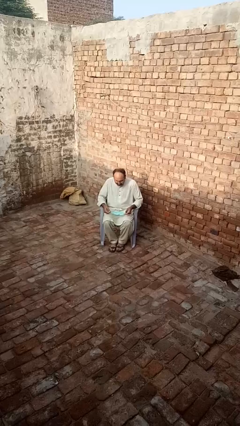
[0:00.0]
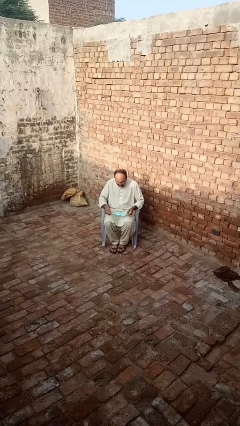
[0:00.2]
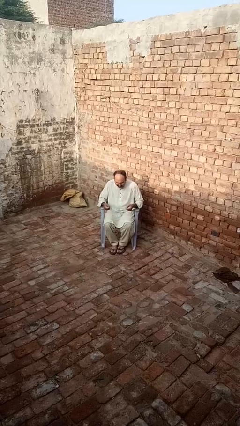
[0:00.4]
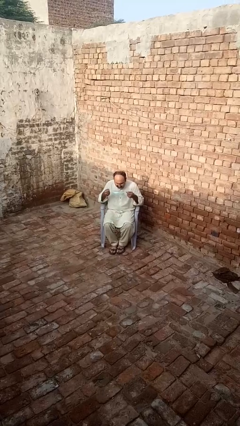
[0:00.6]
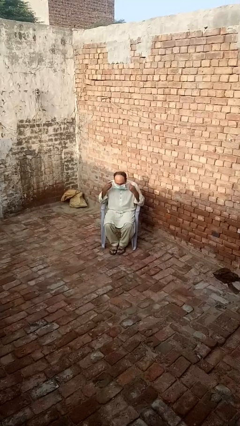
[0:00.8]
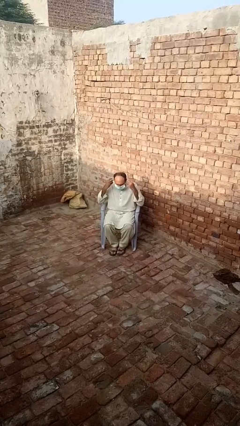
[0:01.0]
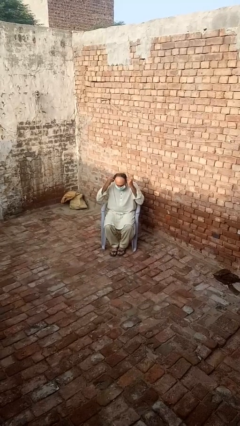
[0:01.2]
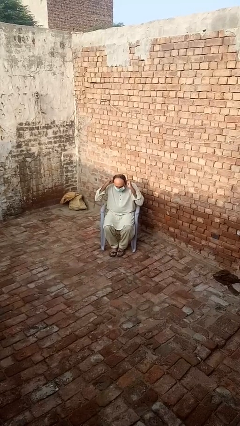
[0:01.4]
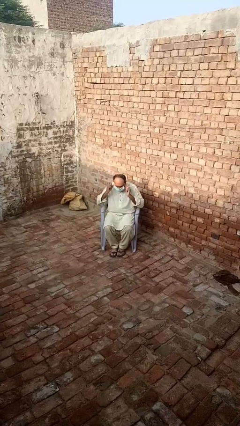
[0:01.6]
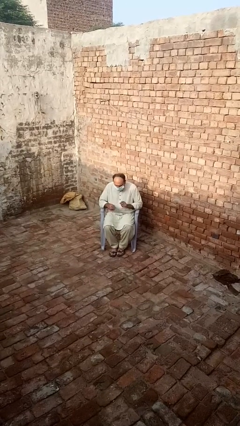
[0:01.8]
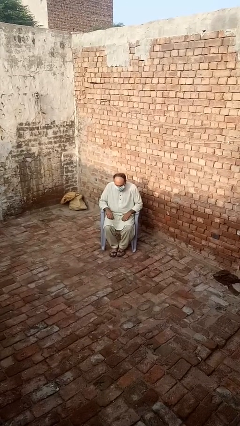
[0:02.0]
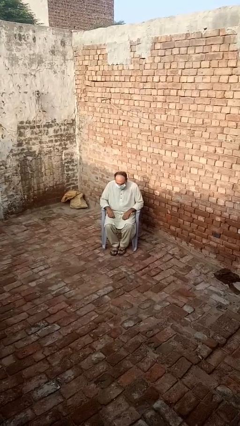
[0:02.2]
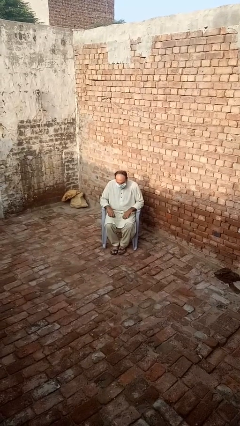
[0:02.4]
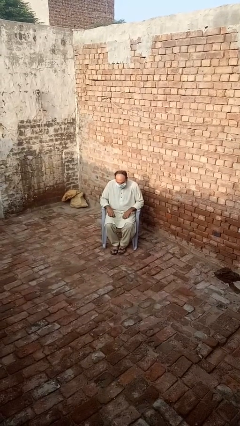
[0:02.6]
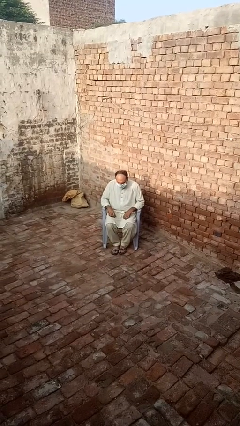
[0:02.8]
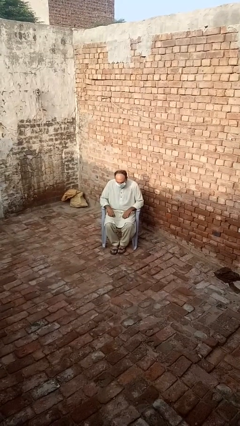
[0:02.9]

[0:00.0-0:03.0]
person puts on facemask

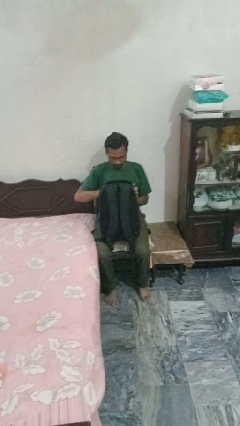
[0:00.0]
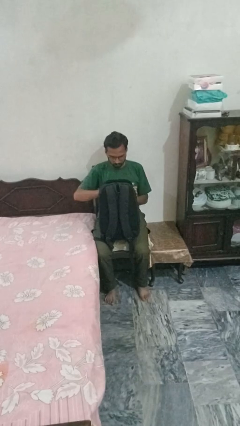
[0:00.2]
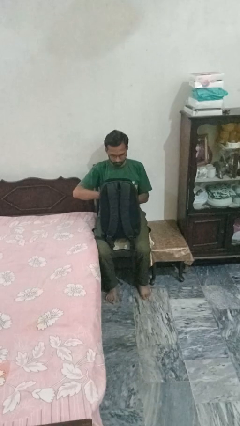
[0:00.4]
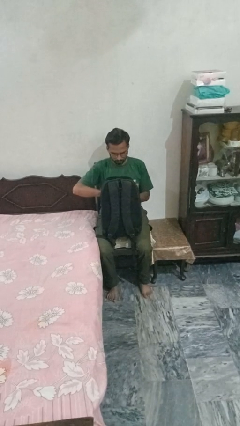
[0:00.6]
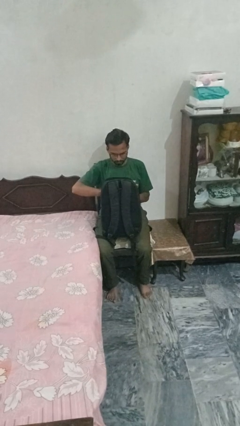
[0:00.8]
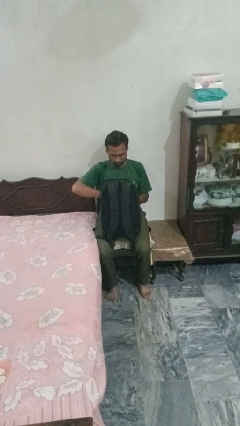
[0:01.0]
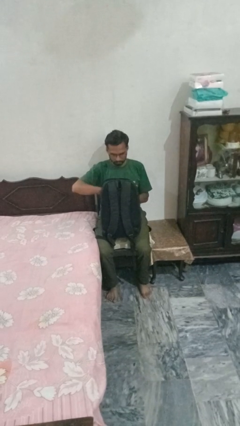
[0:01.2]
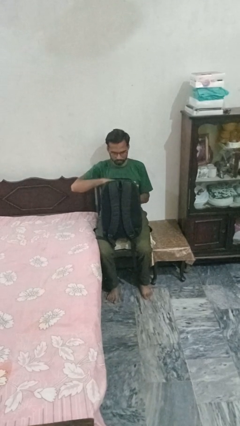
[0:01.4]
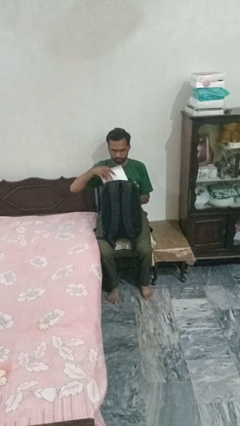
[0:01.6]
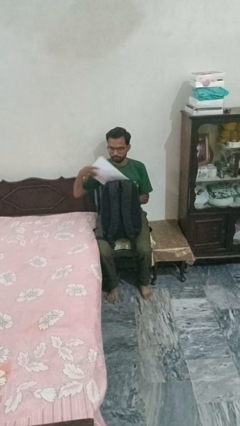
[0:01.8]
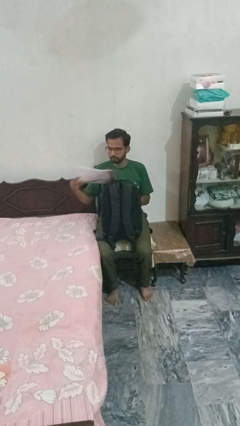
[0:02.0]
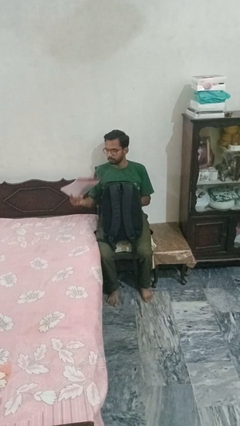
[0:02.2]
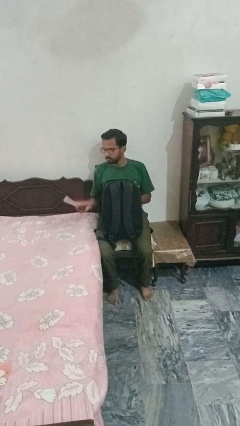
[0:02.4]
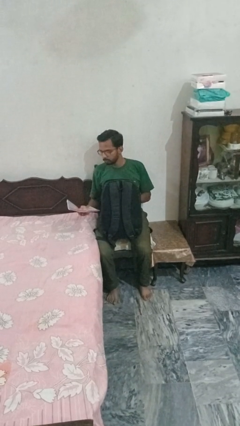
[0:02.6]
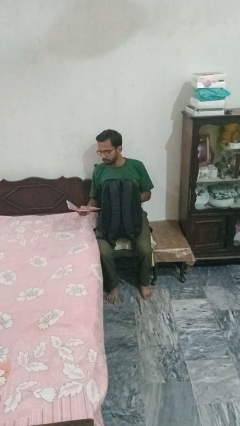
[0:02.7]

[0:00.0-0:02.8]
person takes object from backpack

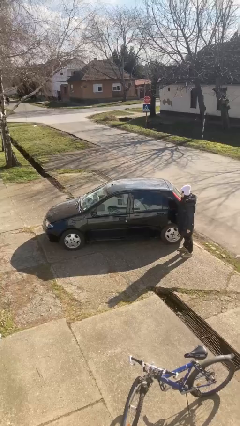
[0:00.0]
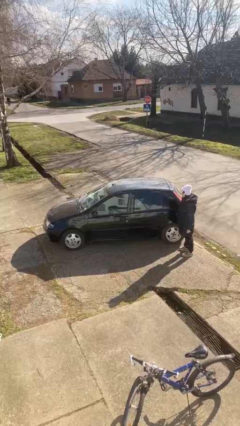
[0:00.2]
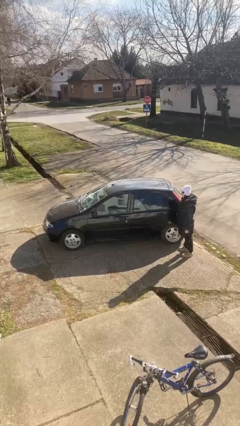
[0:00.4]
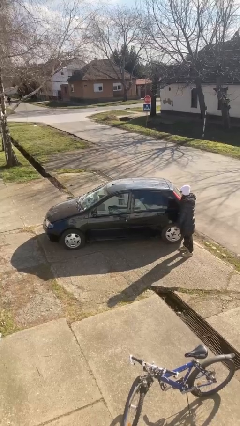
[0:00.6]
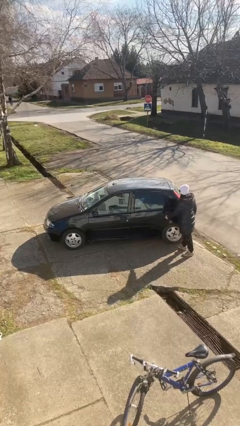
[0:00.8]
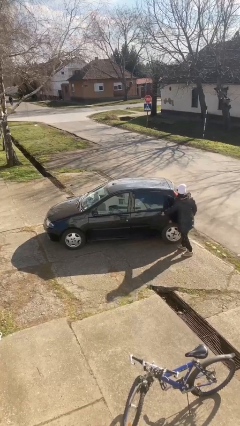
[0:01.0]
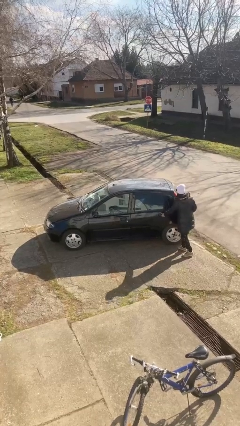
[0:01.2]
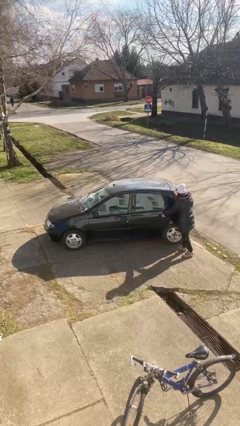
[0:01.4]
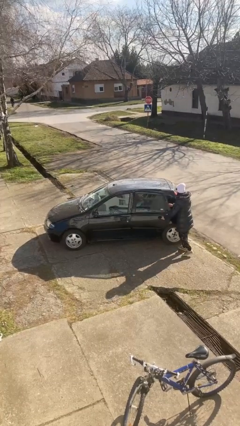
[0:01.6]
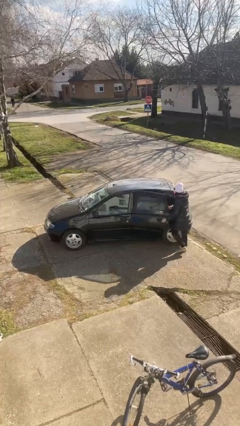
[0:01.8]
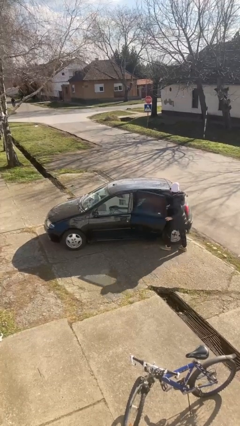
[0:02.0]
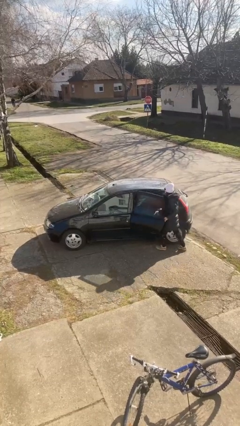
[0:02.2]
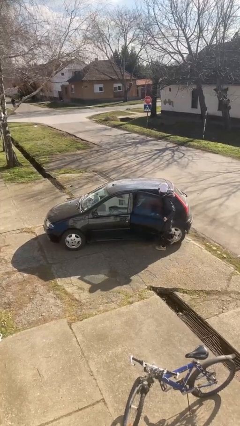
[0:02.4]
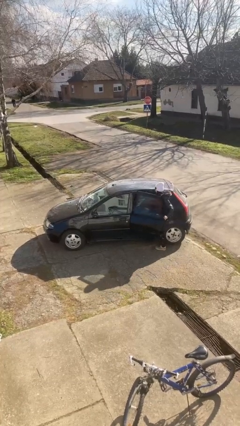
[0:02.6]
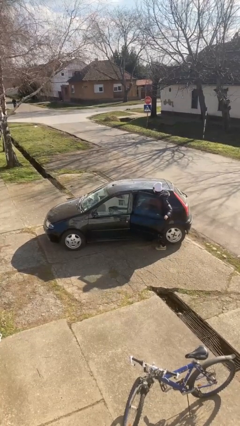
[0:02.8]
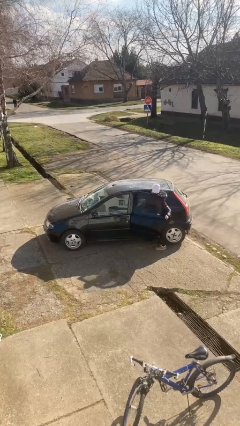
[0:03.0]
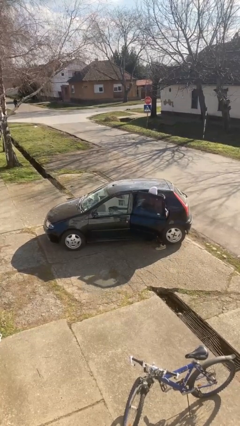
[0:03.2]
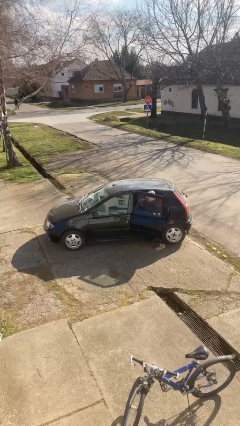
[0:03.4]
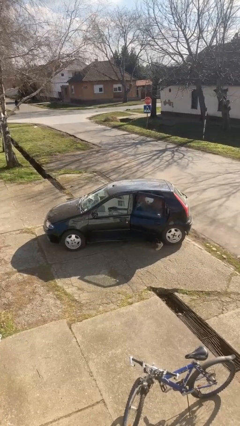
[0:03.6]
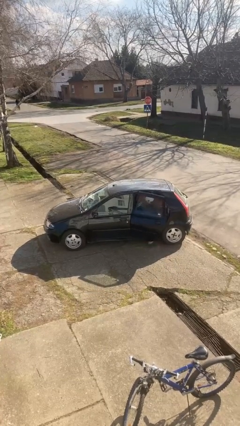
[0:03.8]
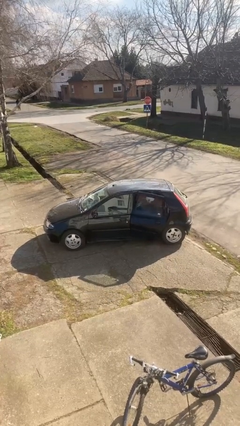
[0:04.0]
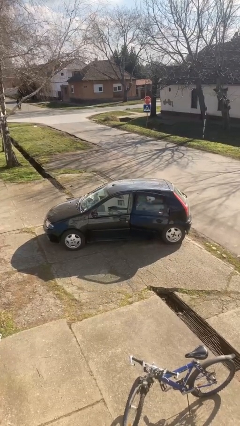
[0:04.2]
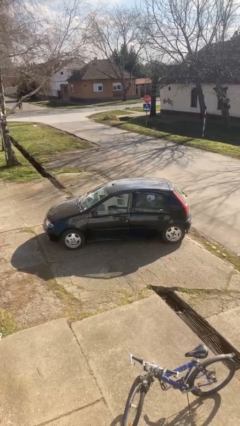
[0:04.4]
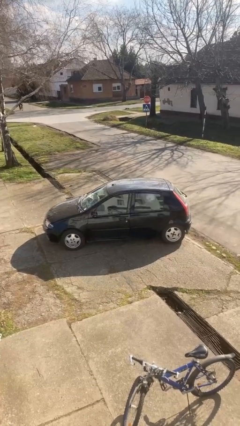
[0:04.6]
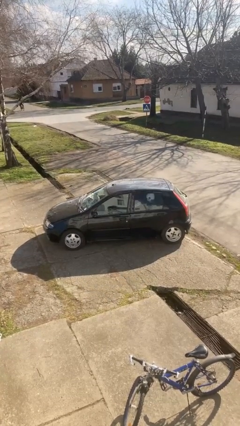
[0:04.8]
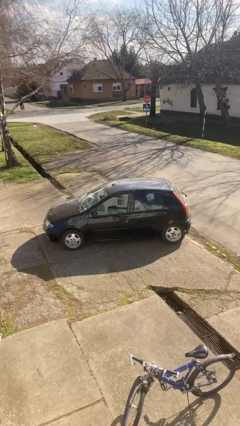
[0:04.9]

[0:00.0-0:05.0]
car picks up person

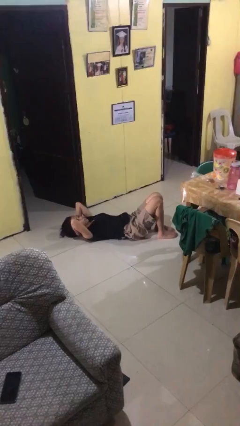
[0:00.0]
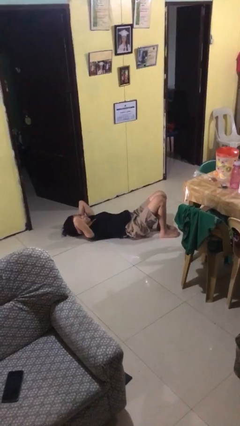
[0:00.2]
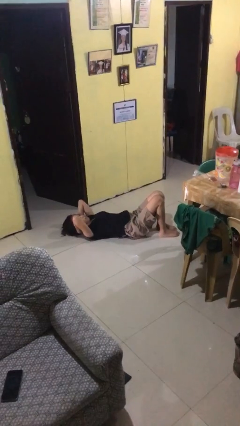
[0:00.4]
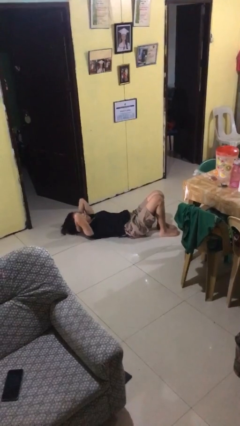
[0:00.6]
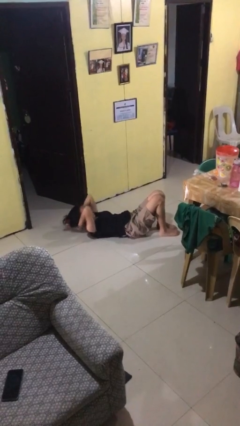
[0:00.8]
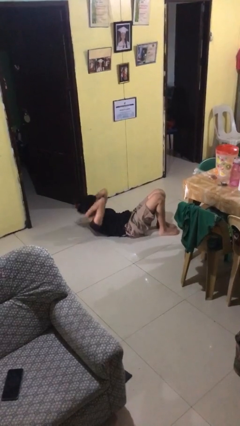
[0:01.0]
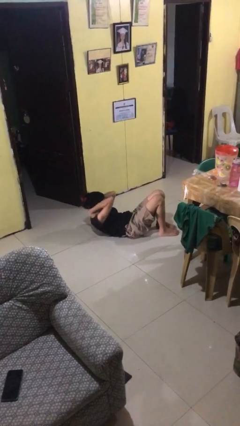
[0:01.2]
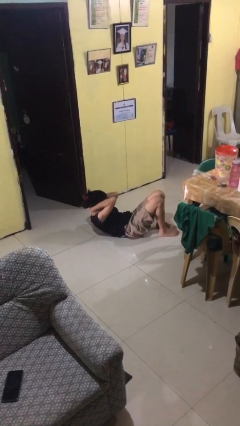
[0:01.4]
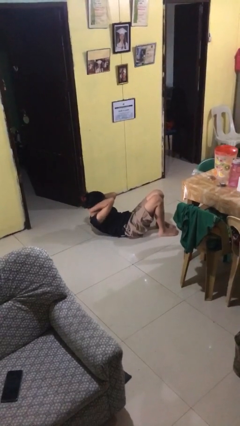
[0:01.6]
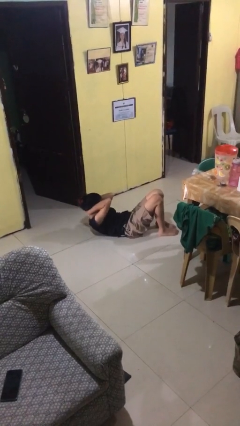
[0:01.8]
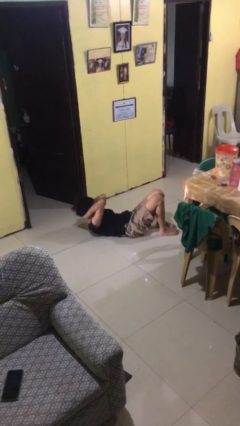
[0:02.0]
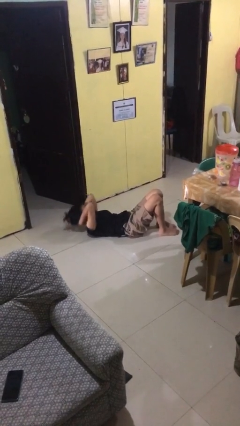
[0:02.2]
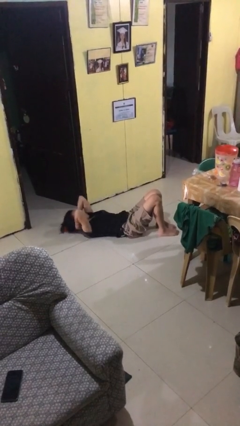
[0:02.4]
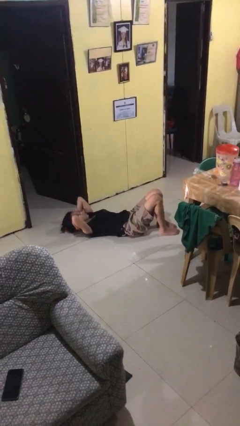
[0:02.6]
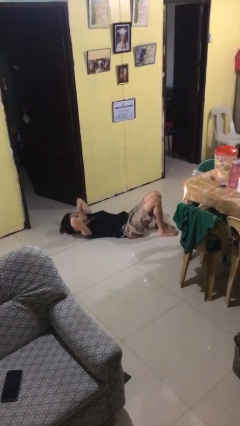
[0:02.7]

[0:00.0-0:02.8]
person exercises with situp

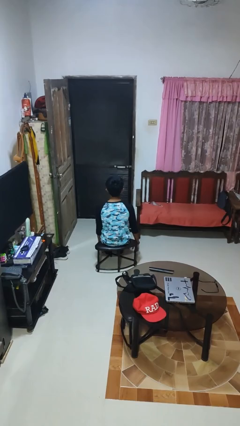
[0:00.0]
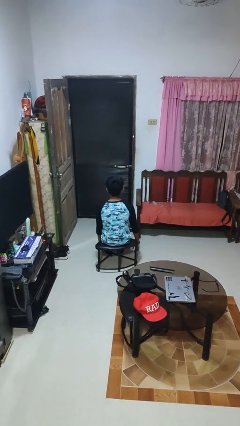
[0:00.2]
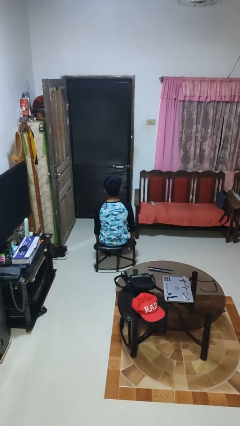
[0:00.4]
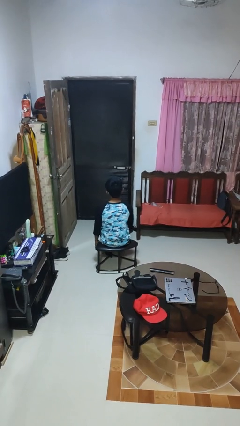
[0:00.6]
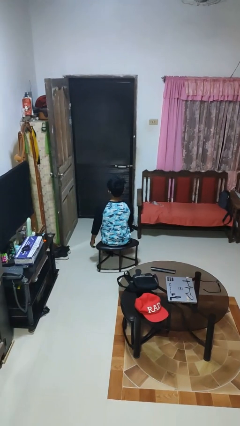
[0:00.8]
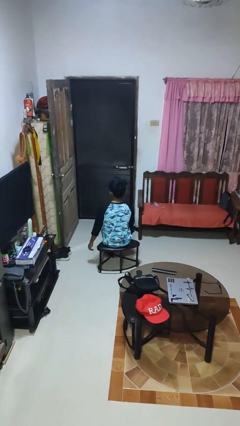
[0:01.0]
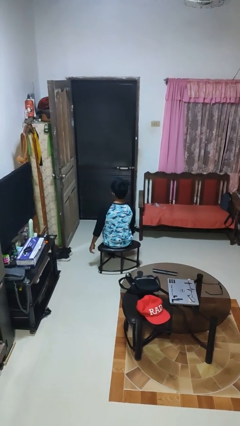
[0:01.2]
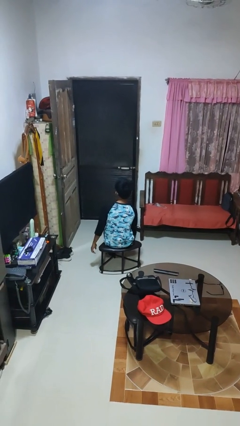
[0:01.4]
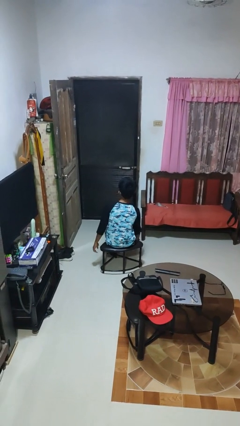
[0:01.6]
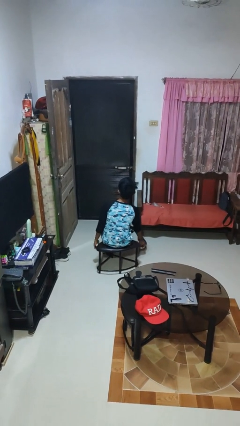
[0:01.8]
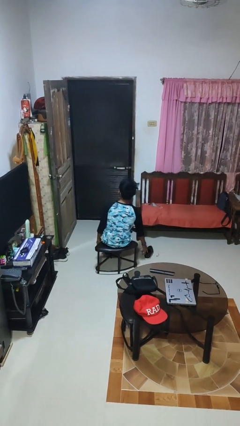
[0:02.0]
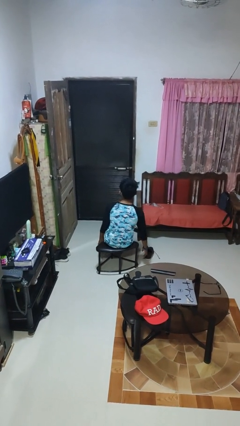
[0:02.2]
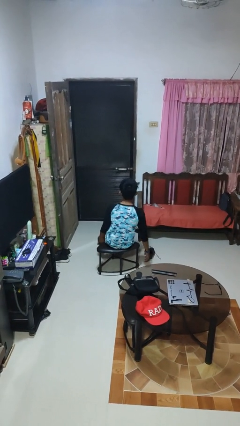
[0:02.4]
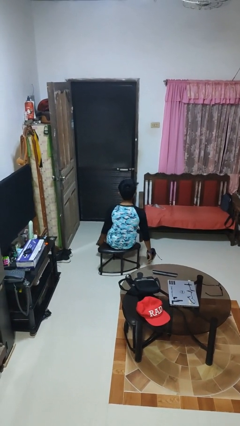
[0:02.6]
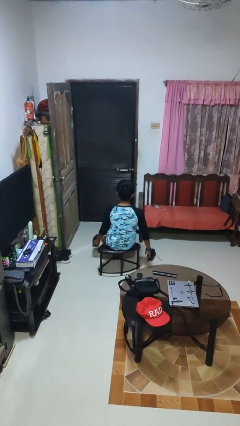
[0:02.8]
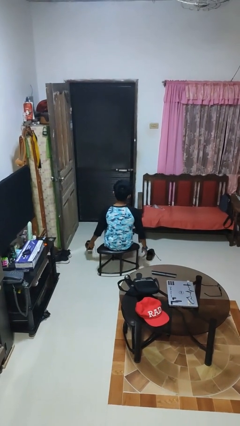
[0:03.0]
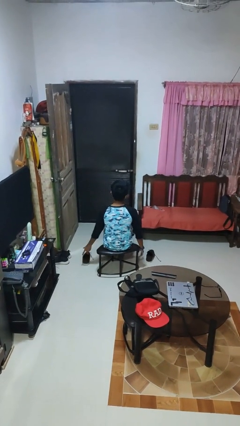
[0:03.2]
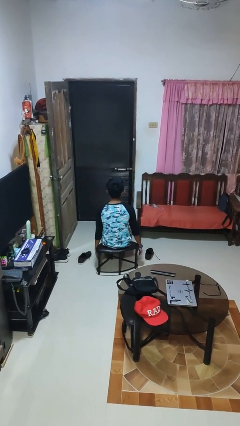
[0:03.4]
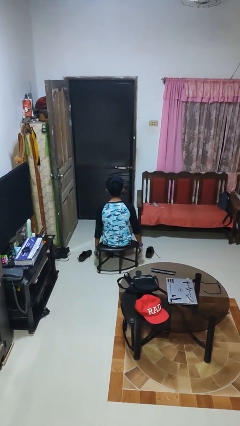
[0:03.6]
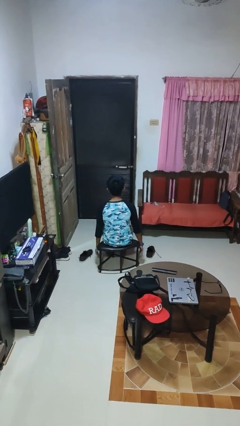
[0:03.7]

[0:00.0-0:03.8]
person takes off shoes
